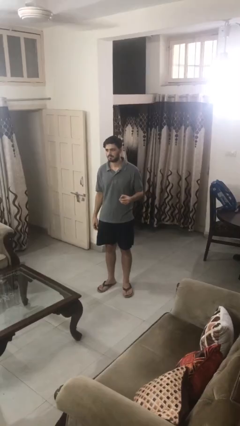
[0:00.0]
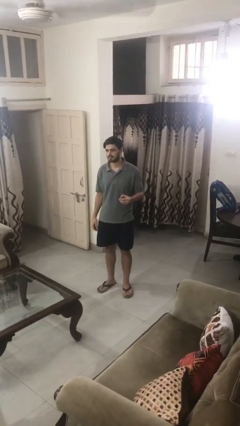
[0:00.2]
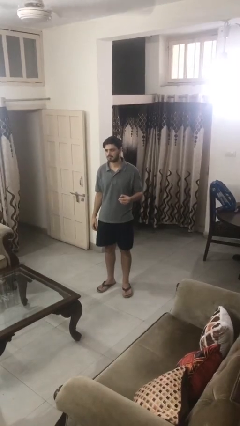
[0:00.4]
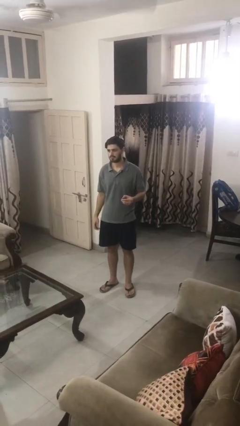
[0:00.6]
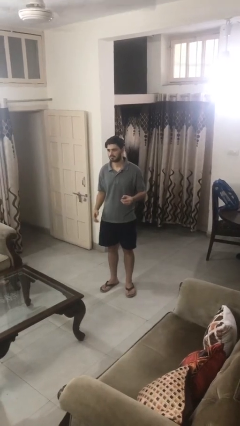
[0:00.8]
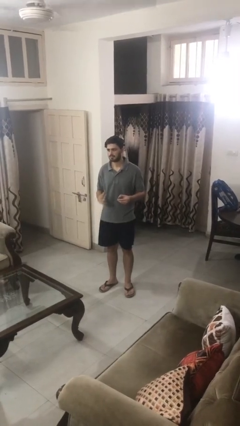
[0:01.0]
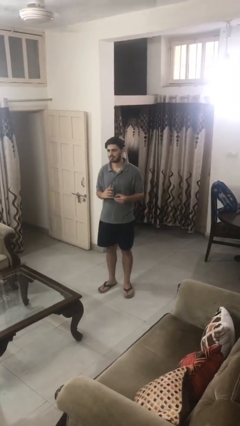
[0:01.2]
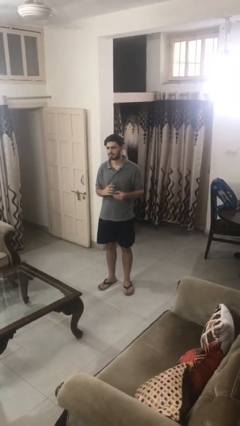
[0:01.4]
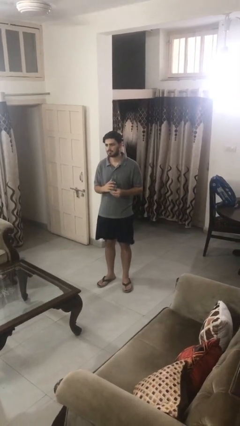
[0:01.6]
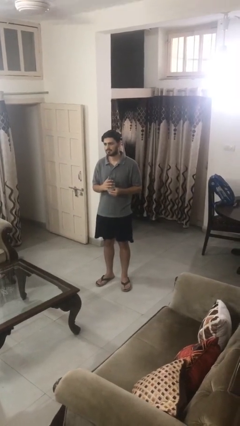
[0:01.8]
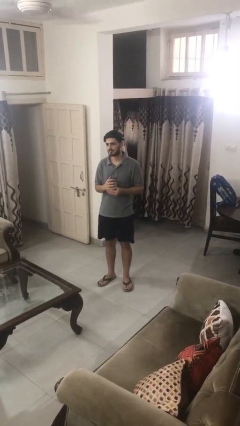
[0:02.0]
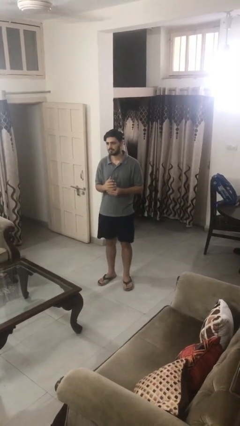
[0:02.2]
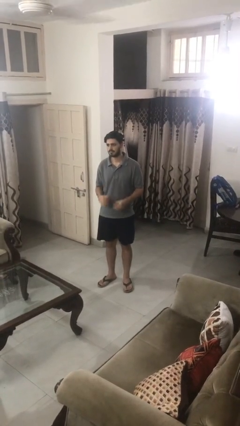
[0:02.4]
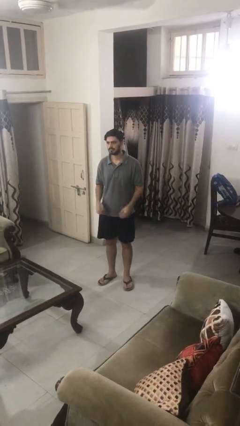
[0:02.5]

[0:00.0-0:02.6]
person puts on ring

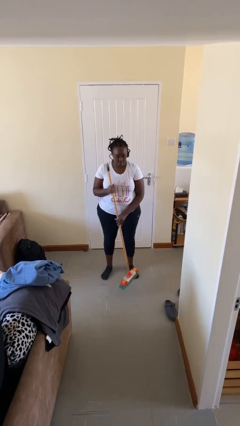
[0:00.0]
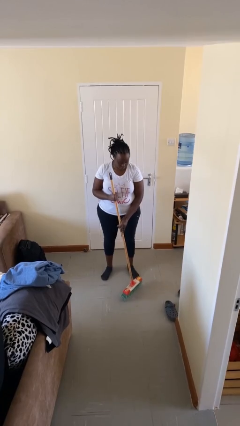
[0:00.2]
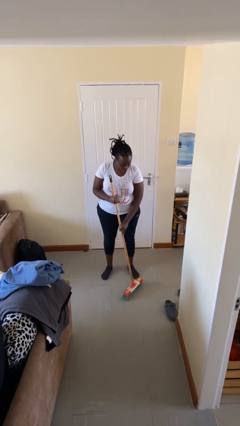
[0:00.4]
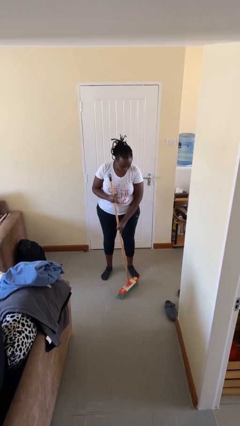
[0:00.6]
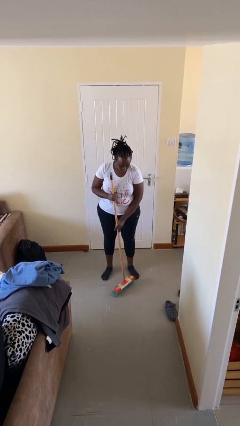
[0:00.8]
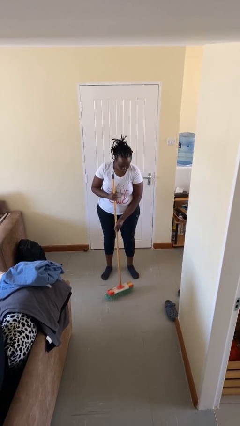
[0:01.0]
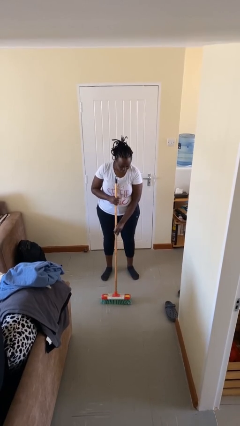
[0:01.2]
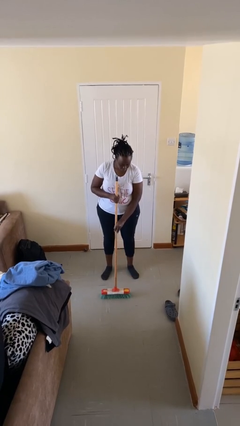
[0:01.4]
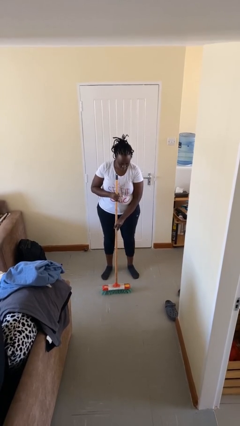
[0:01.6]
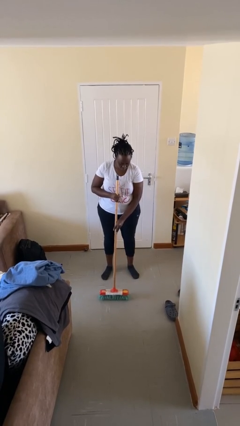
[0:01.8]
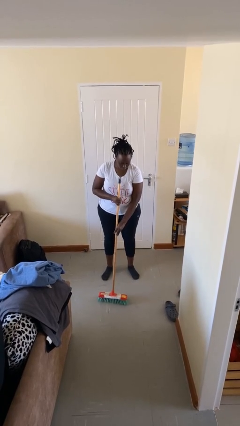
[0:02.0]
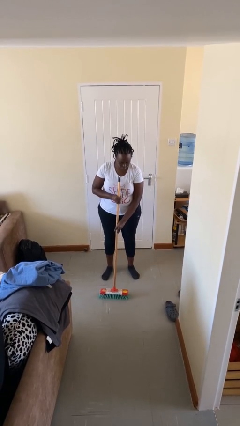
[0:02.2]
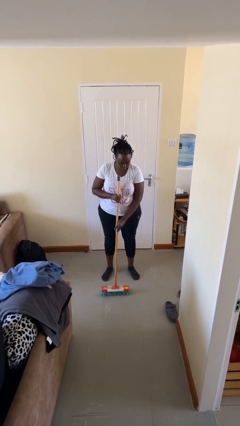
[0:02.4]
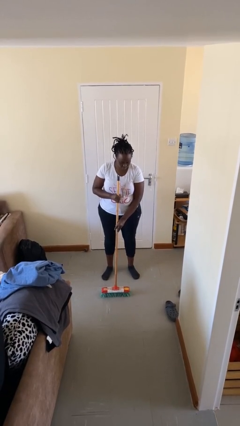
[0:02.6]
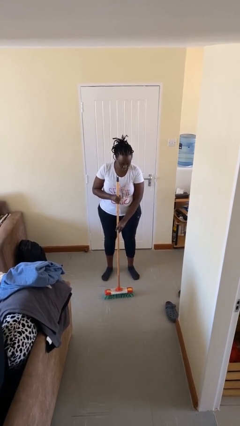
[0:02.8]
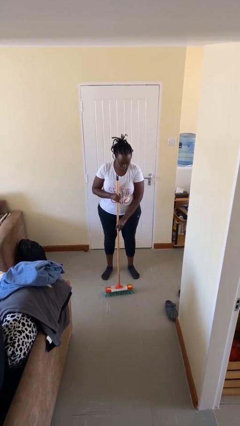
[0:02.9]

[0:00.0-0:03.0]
person sweeps floor

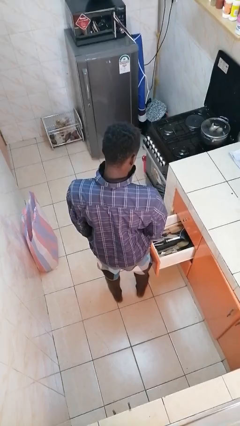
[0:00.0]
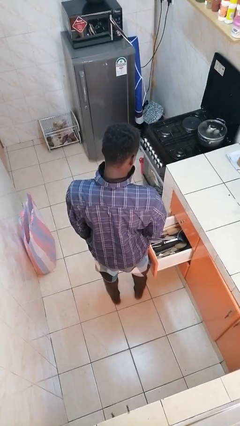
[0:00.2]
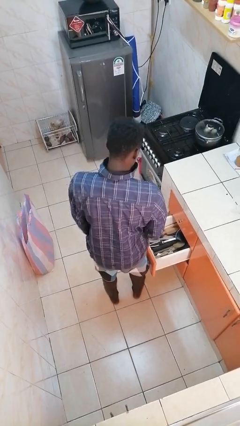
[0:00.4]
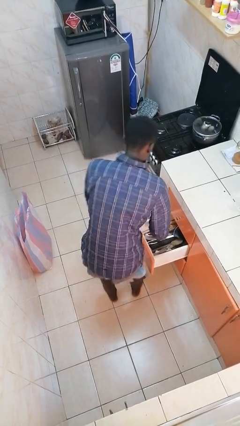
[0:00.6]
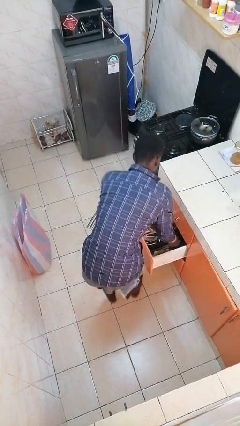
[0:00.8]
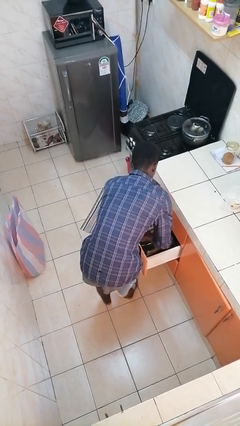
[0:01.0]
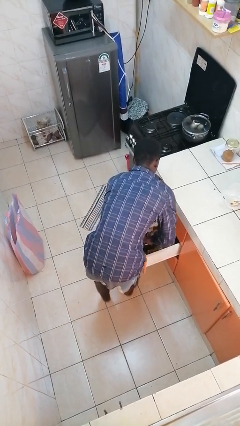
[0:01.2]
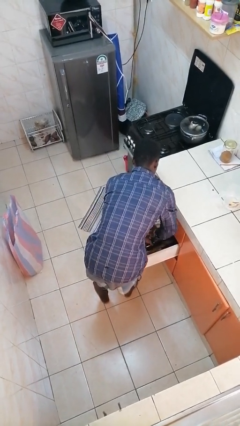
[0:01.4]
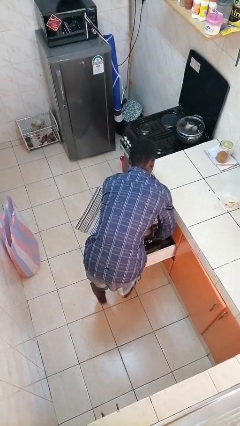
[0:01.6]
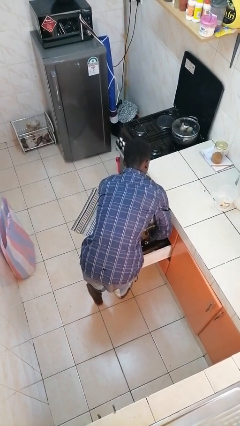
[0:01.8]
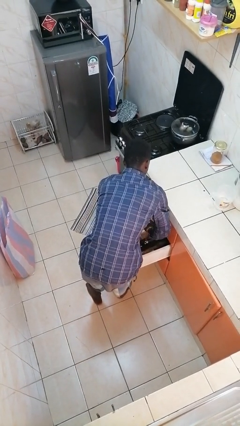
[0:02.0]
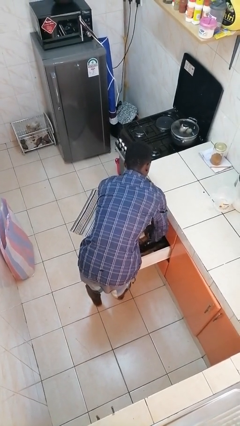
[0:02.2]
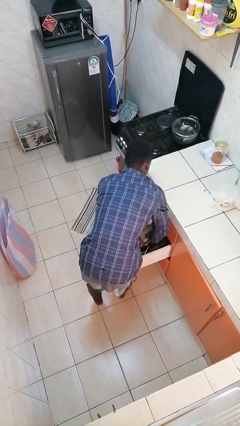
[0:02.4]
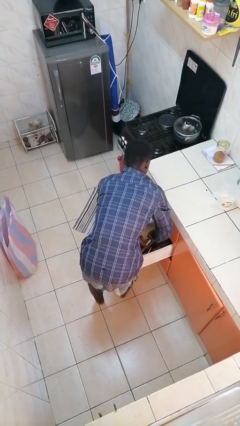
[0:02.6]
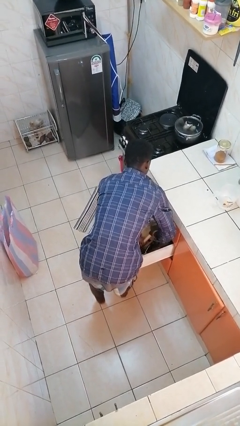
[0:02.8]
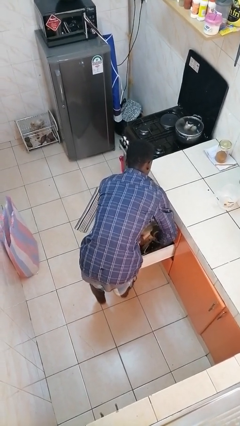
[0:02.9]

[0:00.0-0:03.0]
person searches in kitchen drawer

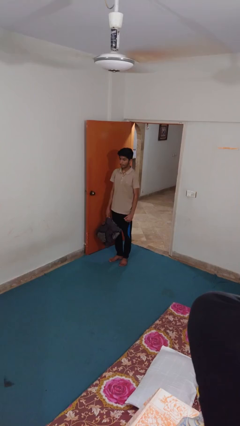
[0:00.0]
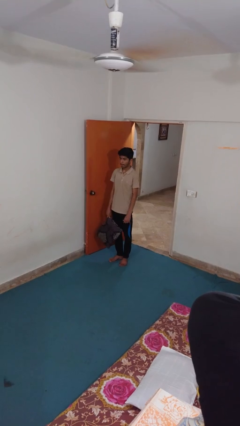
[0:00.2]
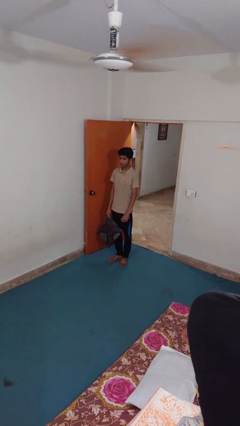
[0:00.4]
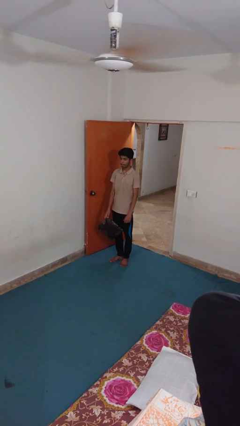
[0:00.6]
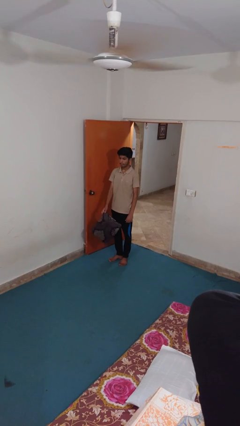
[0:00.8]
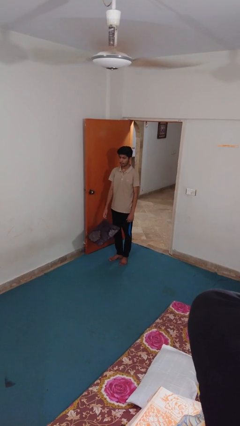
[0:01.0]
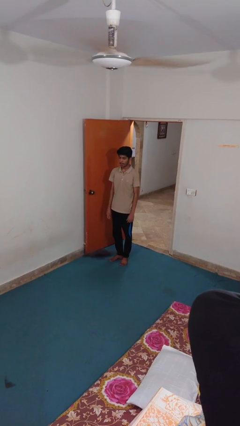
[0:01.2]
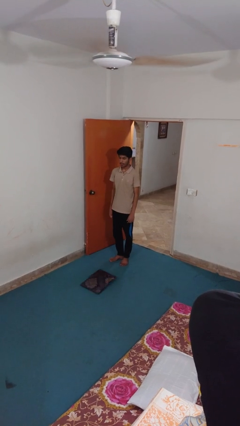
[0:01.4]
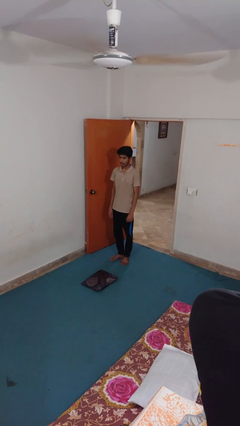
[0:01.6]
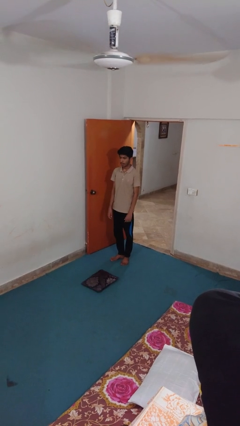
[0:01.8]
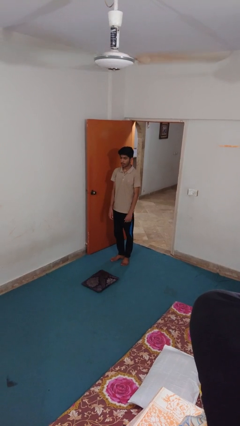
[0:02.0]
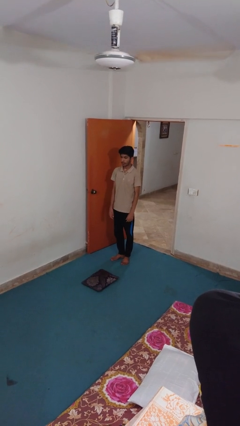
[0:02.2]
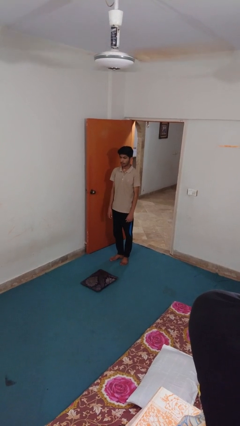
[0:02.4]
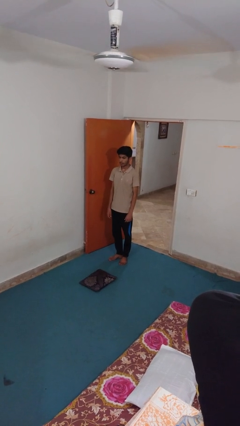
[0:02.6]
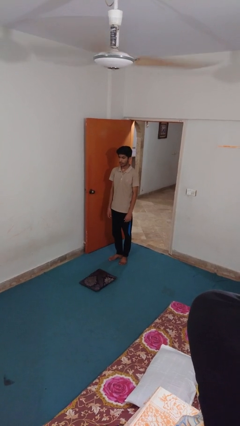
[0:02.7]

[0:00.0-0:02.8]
person drops object

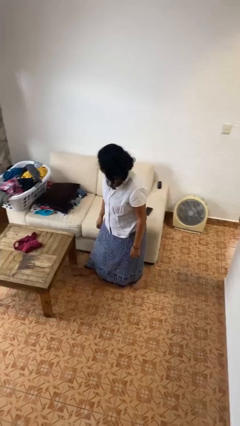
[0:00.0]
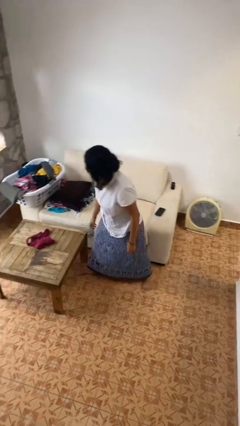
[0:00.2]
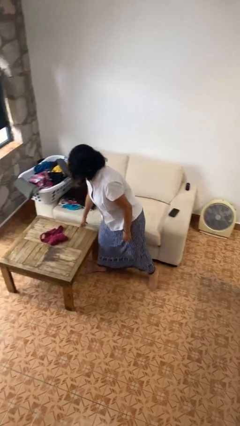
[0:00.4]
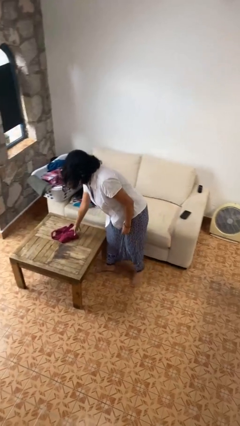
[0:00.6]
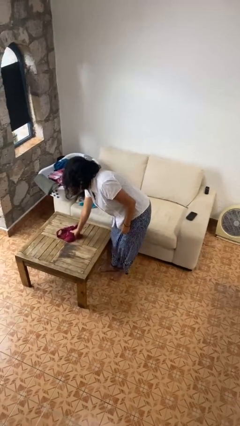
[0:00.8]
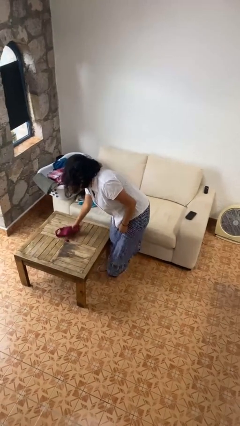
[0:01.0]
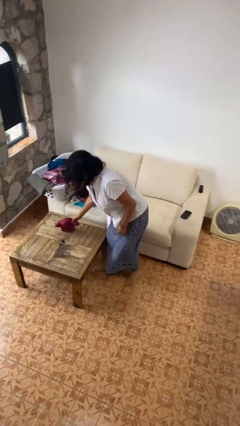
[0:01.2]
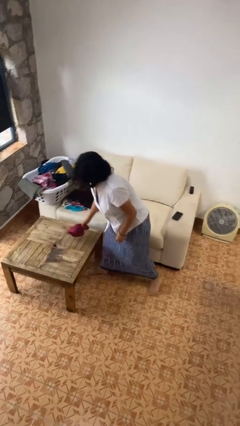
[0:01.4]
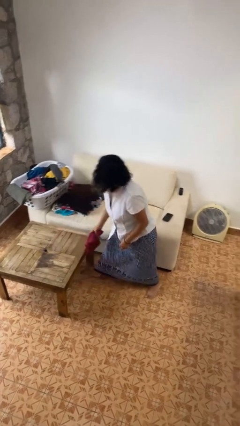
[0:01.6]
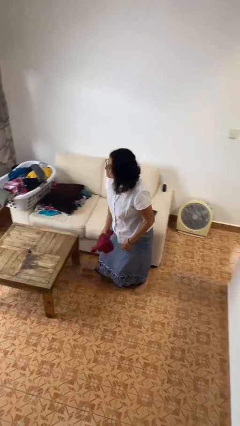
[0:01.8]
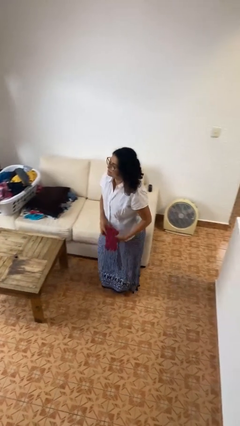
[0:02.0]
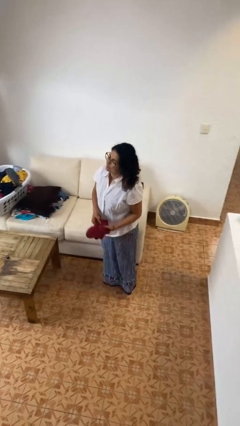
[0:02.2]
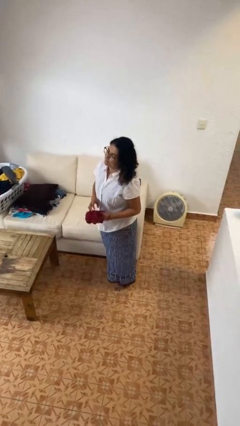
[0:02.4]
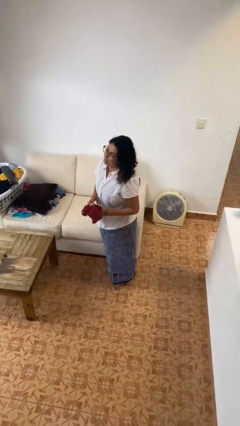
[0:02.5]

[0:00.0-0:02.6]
person picks up object from table

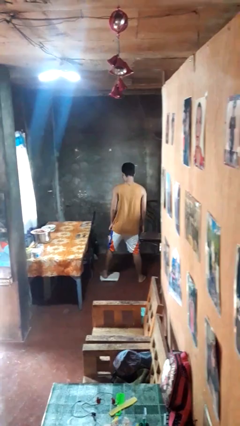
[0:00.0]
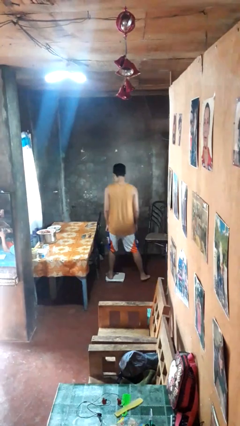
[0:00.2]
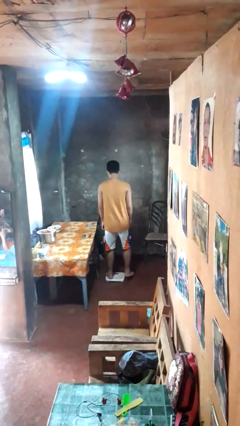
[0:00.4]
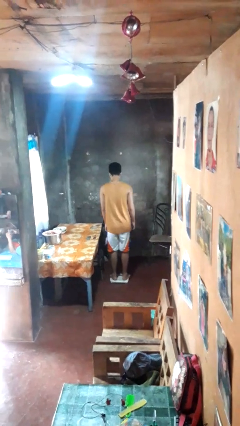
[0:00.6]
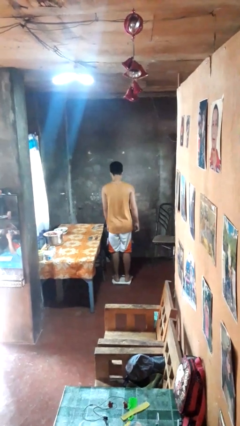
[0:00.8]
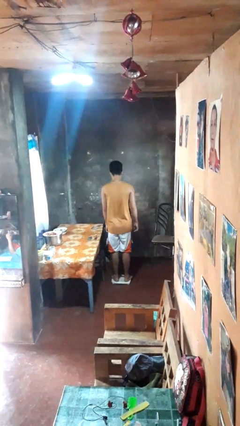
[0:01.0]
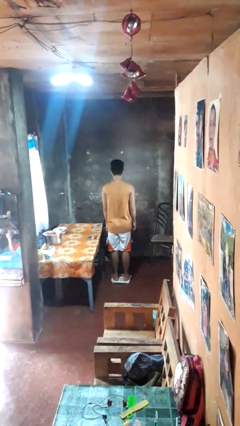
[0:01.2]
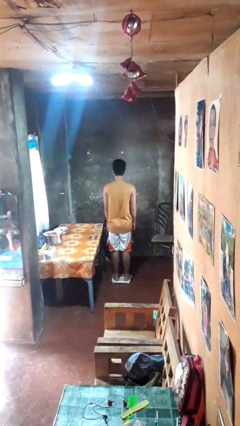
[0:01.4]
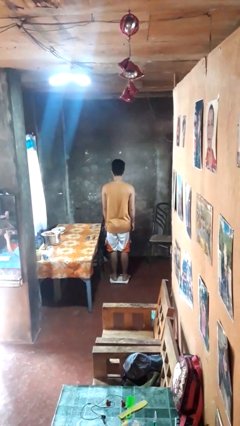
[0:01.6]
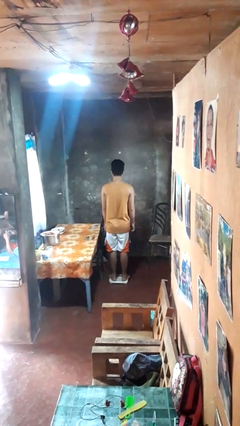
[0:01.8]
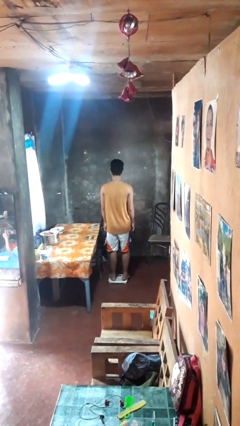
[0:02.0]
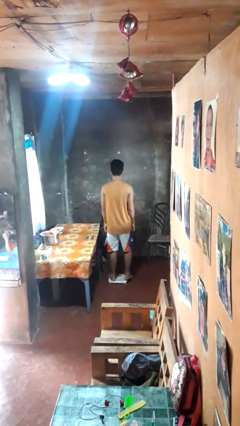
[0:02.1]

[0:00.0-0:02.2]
person uses bodyweight scale

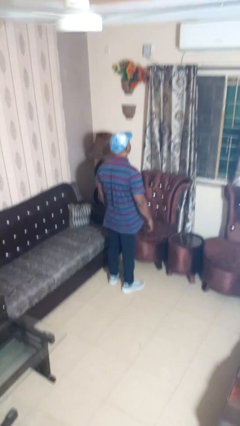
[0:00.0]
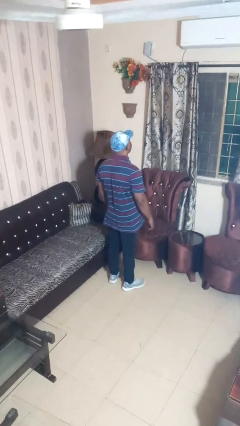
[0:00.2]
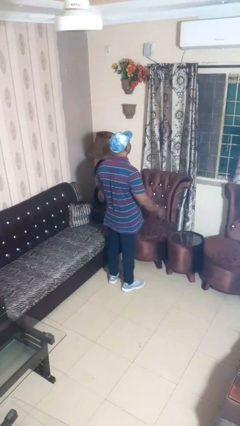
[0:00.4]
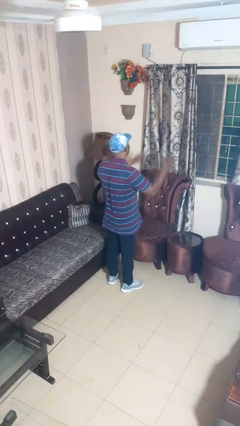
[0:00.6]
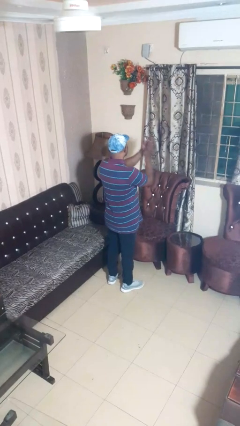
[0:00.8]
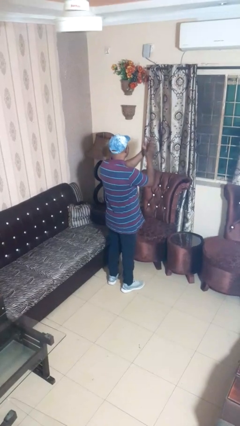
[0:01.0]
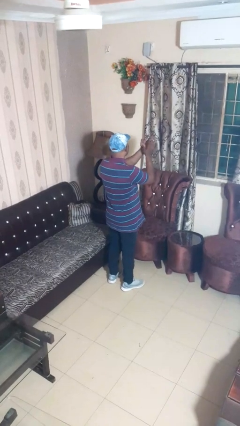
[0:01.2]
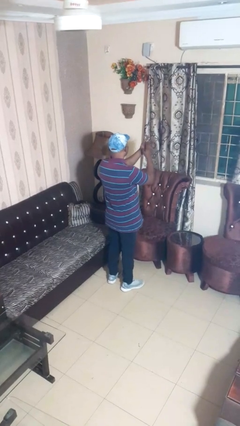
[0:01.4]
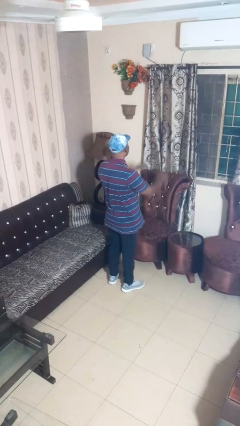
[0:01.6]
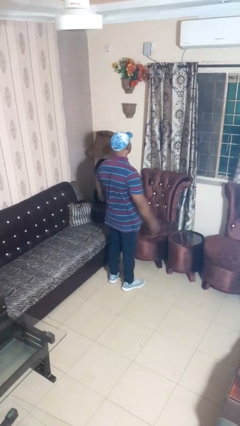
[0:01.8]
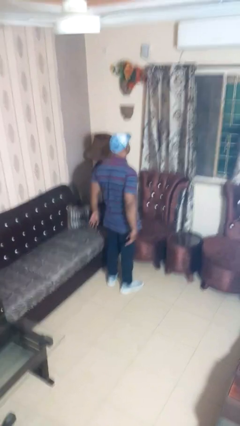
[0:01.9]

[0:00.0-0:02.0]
person claps hands
